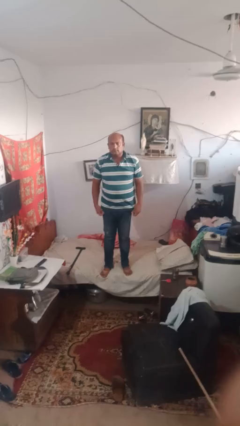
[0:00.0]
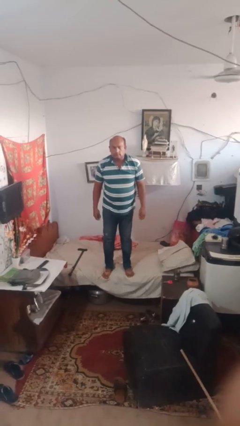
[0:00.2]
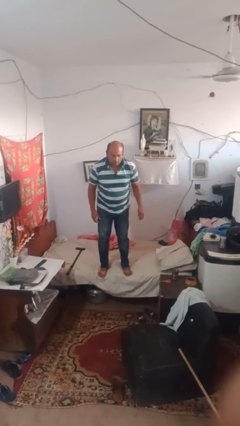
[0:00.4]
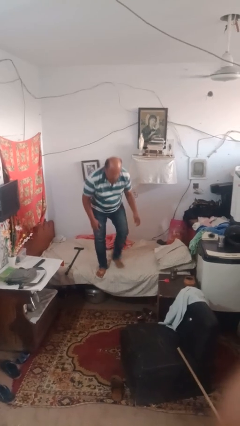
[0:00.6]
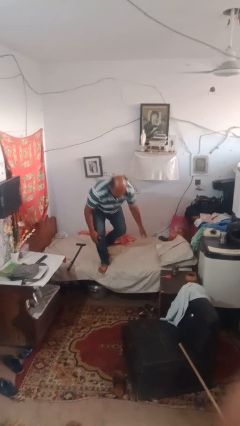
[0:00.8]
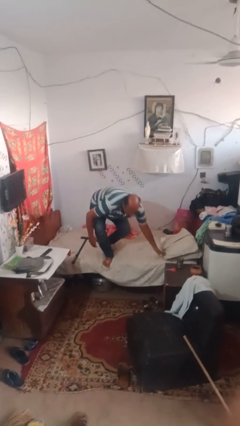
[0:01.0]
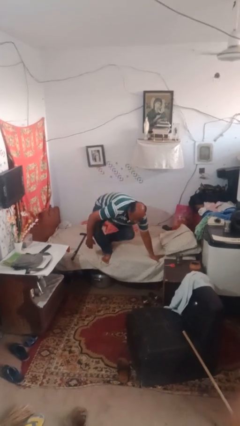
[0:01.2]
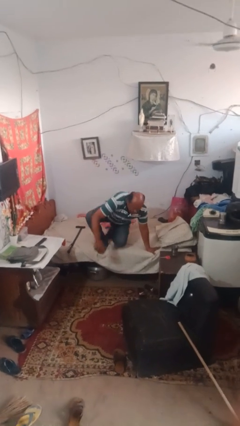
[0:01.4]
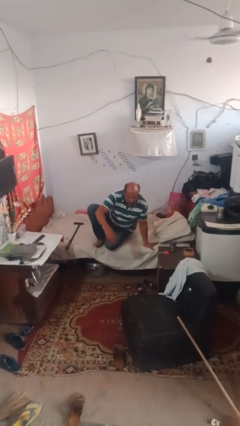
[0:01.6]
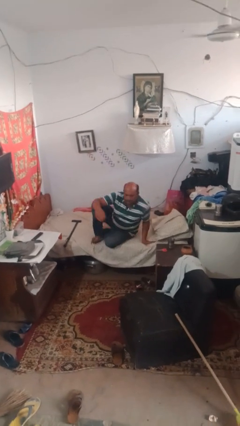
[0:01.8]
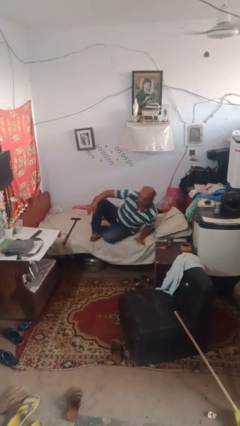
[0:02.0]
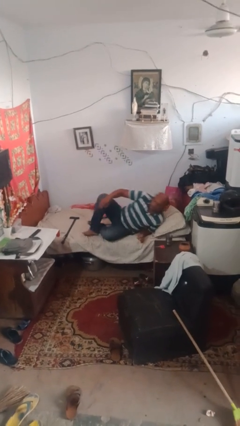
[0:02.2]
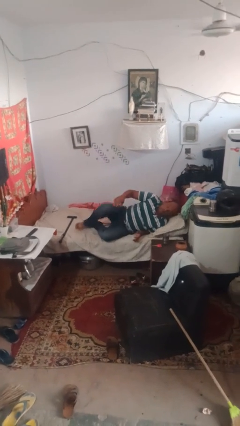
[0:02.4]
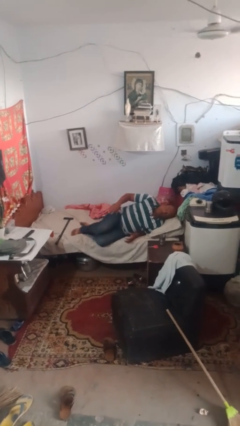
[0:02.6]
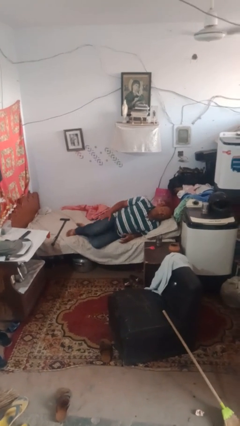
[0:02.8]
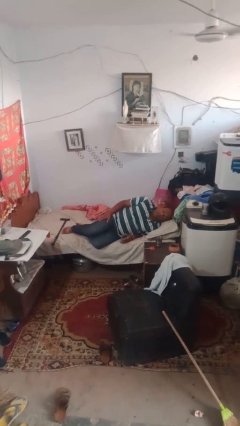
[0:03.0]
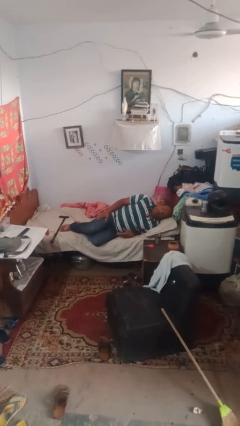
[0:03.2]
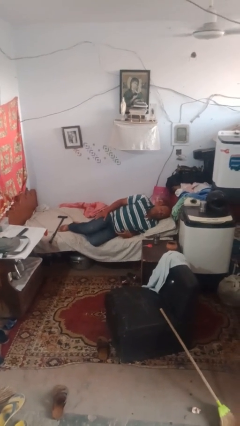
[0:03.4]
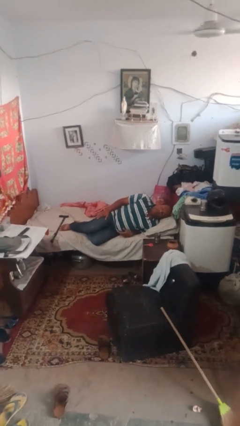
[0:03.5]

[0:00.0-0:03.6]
person lies down on bed

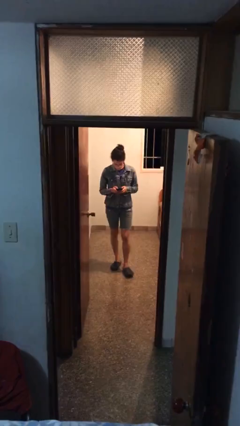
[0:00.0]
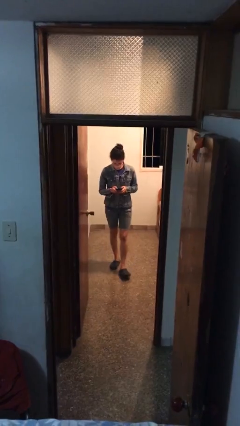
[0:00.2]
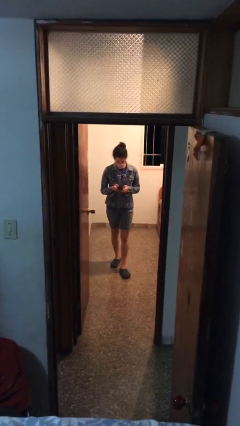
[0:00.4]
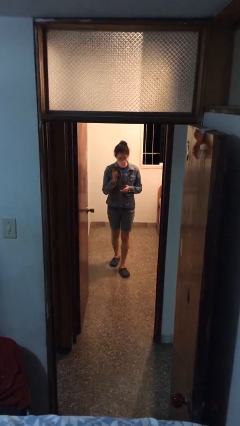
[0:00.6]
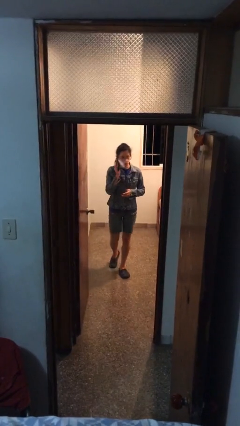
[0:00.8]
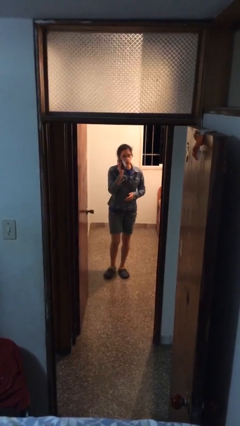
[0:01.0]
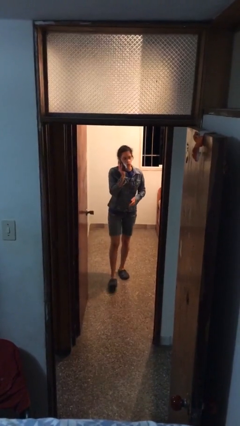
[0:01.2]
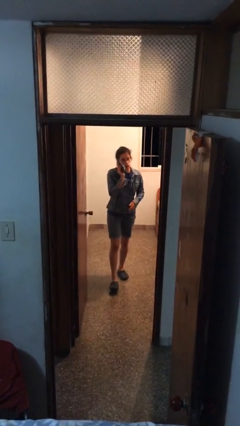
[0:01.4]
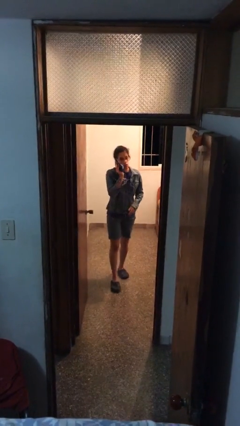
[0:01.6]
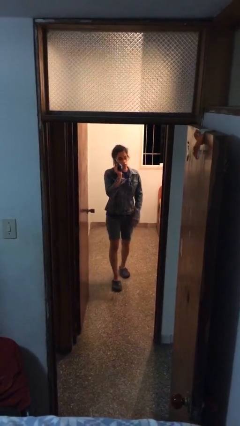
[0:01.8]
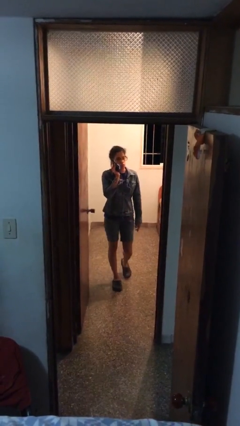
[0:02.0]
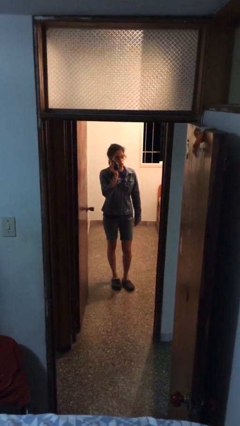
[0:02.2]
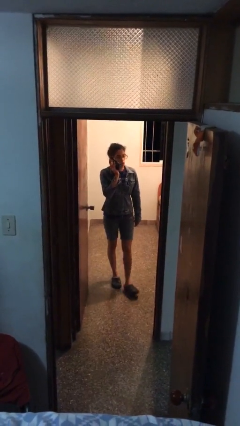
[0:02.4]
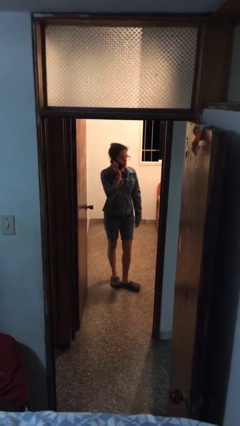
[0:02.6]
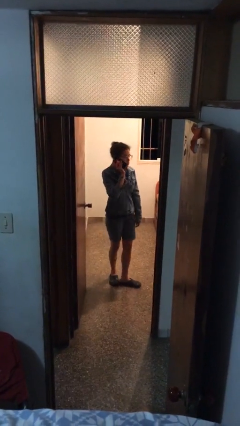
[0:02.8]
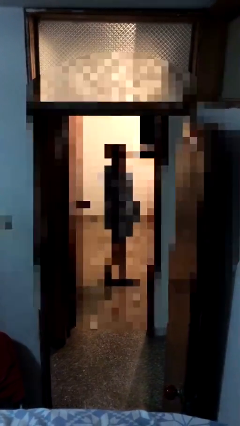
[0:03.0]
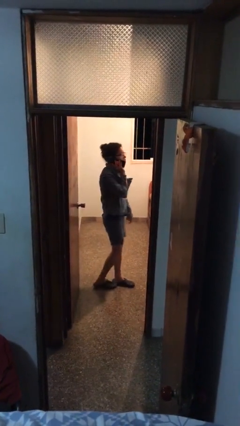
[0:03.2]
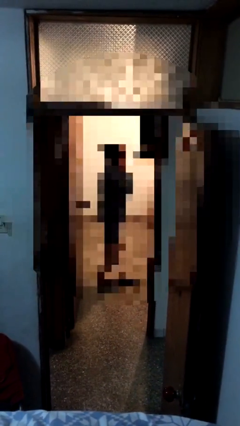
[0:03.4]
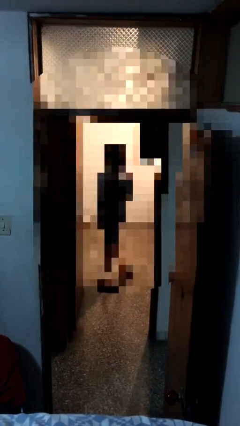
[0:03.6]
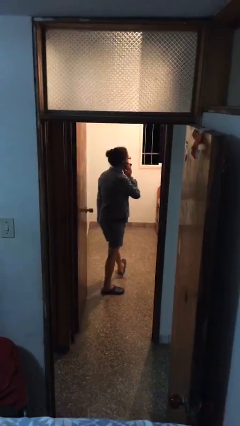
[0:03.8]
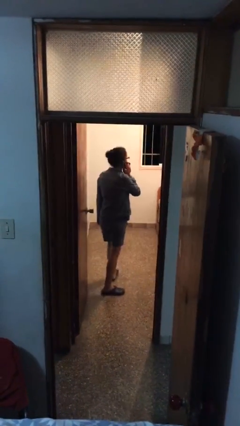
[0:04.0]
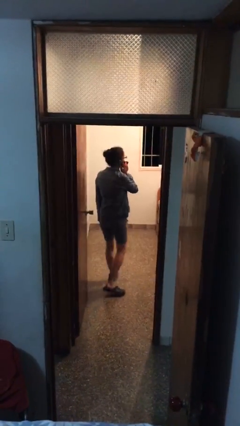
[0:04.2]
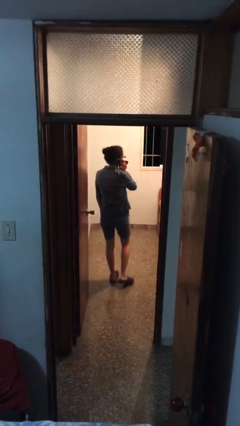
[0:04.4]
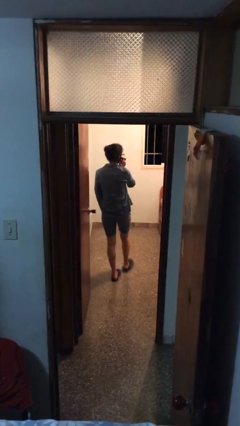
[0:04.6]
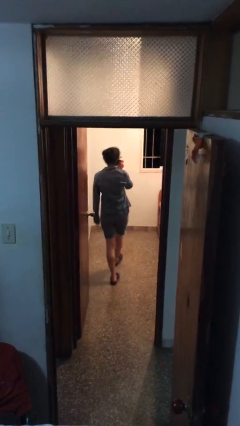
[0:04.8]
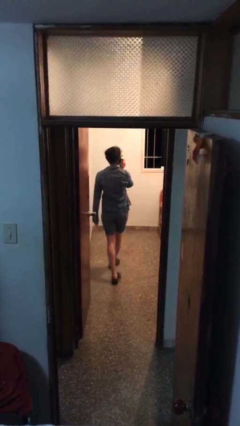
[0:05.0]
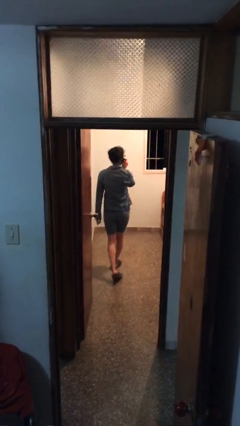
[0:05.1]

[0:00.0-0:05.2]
person talks on phone

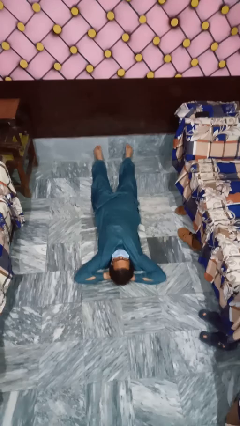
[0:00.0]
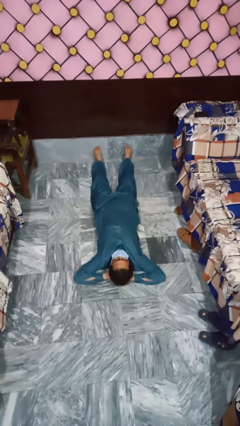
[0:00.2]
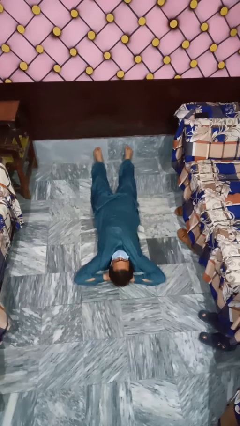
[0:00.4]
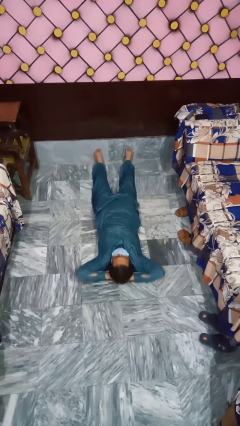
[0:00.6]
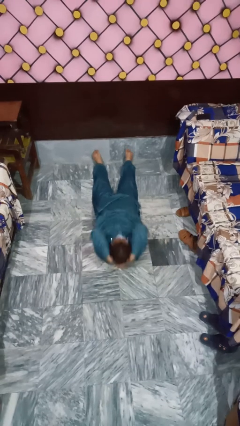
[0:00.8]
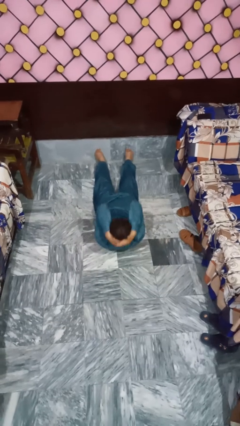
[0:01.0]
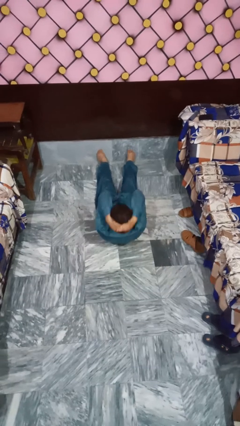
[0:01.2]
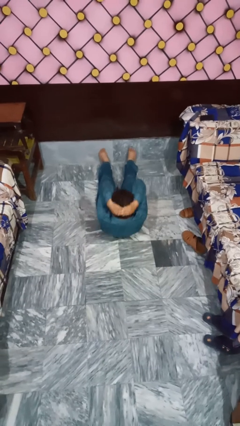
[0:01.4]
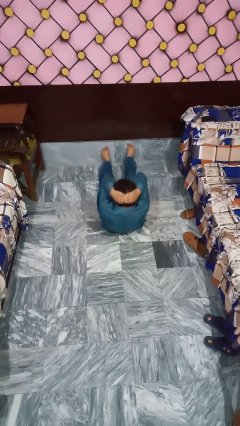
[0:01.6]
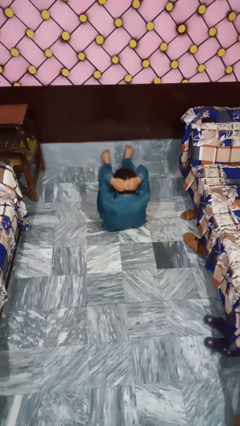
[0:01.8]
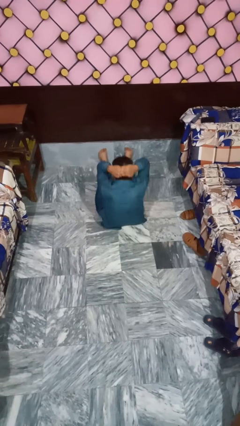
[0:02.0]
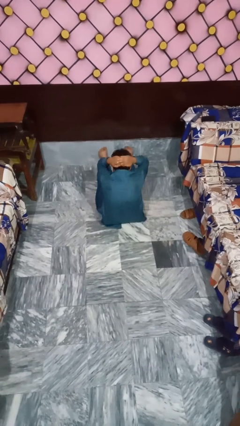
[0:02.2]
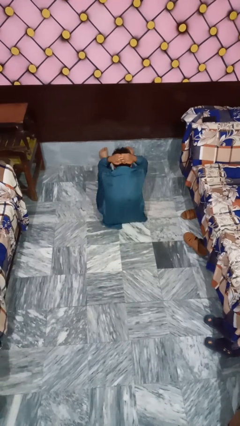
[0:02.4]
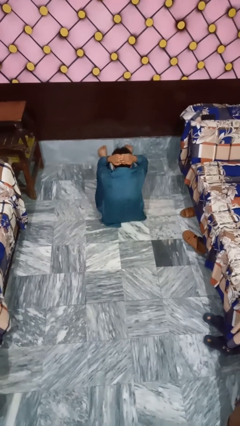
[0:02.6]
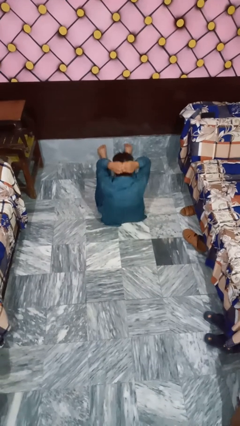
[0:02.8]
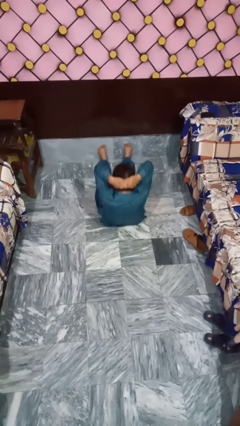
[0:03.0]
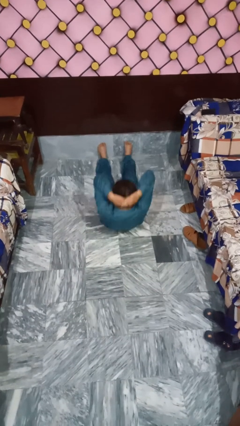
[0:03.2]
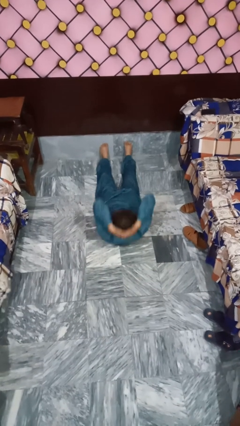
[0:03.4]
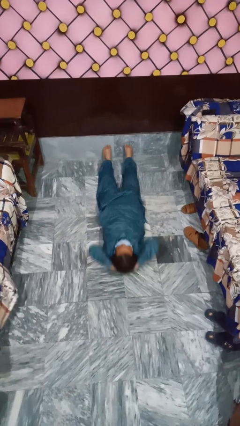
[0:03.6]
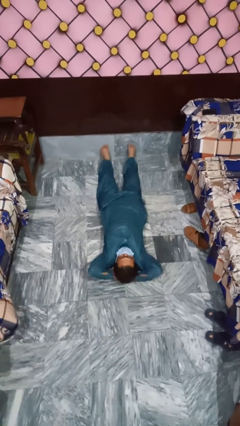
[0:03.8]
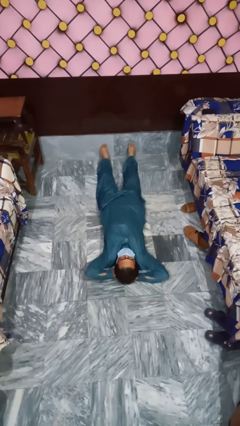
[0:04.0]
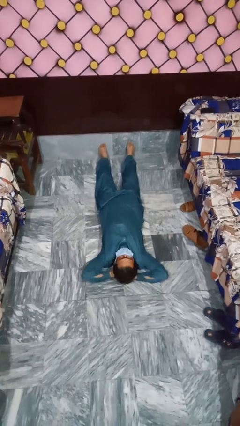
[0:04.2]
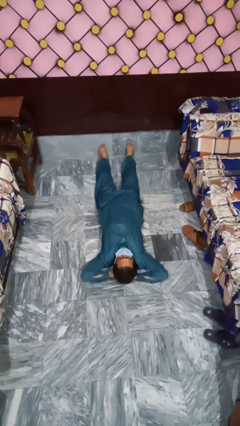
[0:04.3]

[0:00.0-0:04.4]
person exercises with situp

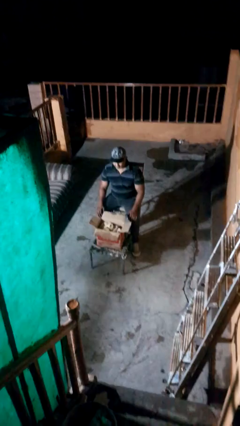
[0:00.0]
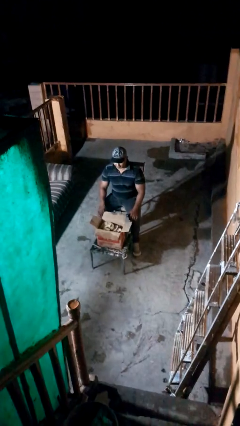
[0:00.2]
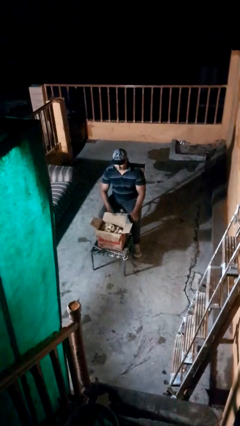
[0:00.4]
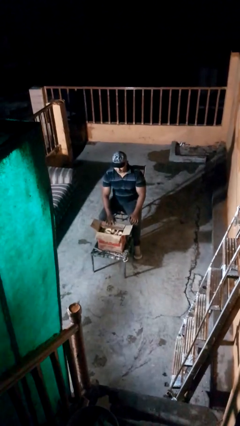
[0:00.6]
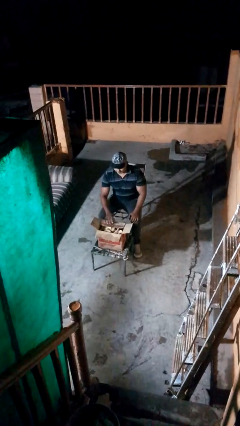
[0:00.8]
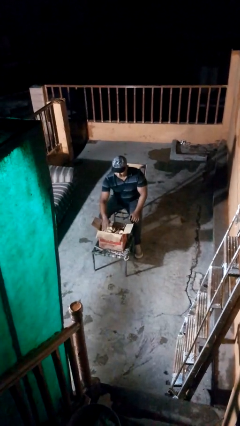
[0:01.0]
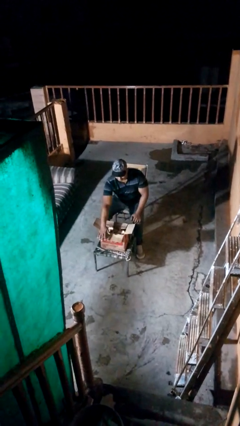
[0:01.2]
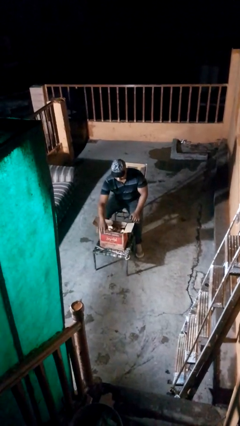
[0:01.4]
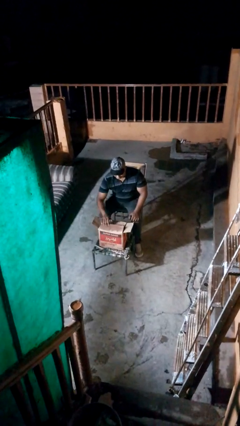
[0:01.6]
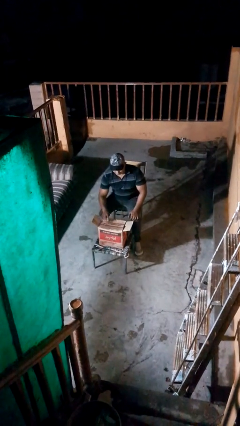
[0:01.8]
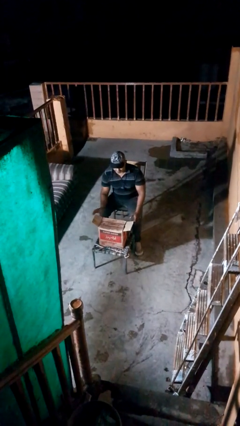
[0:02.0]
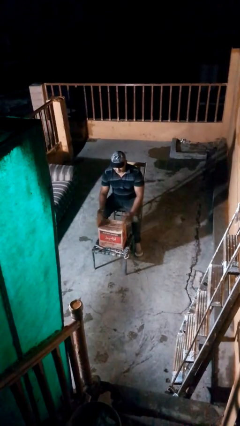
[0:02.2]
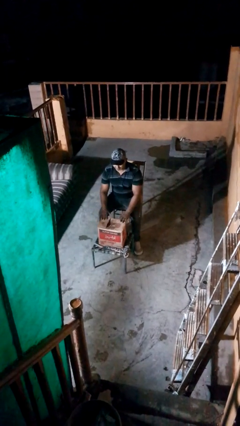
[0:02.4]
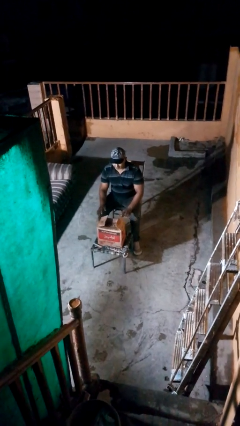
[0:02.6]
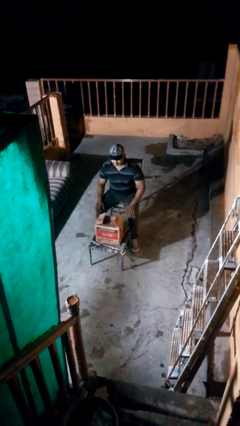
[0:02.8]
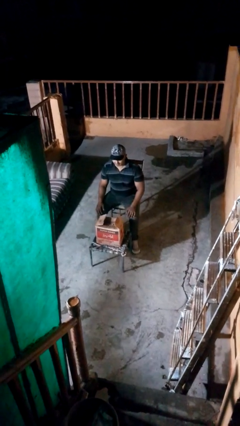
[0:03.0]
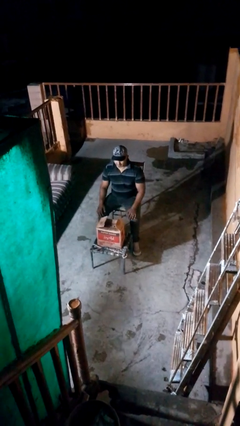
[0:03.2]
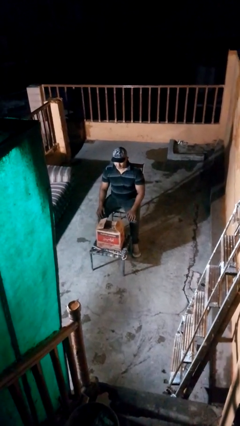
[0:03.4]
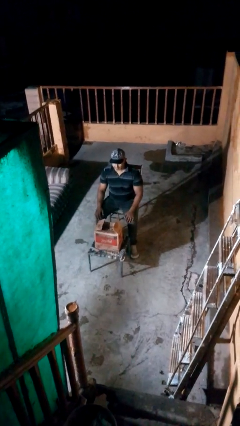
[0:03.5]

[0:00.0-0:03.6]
person closes box

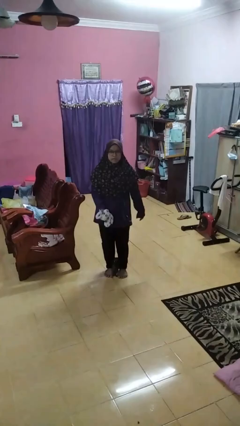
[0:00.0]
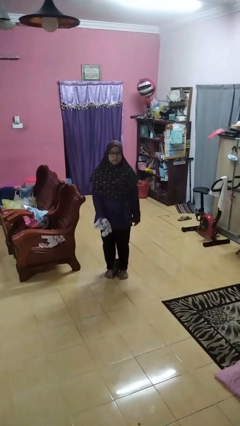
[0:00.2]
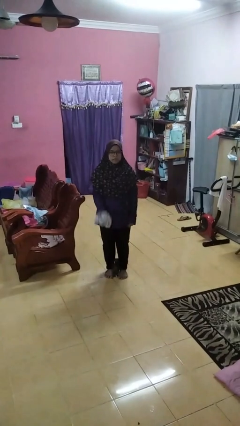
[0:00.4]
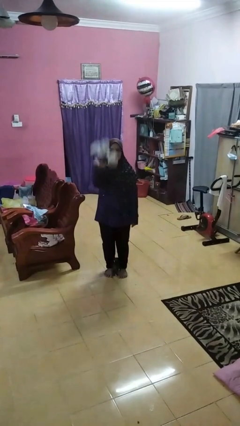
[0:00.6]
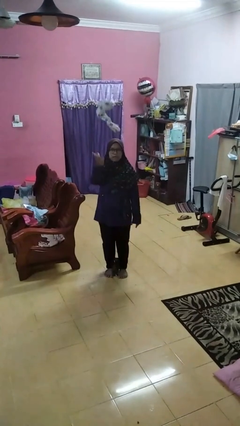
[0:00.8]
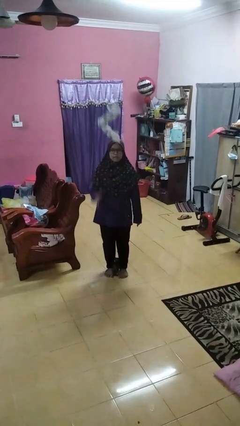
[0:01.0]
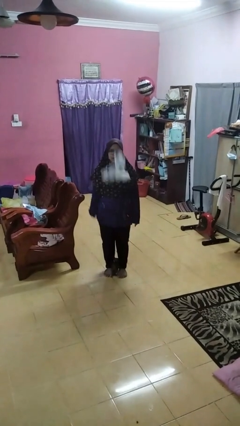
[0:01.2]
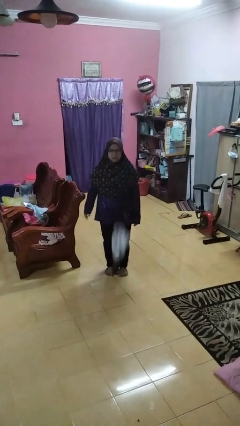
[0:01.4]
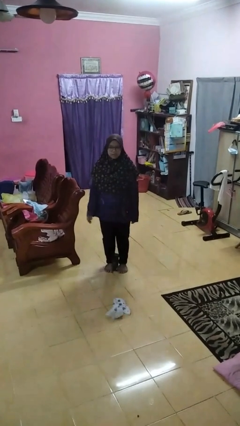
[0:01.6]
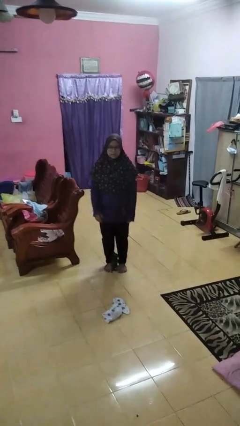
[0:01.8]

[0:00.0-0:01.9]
person throws object into air
